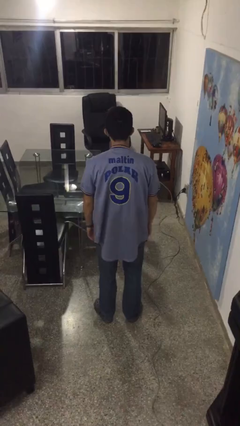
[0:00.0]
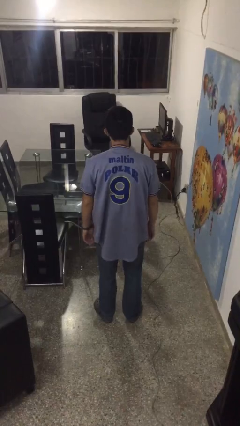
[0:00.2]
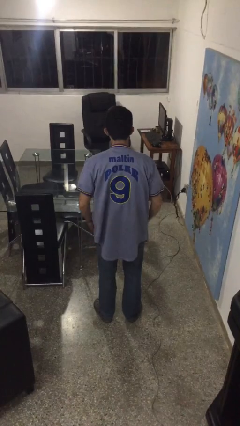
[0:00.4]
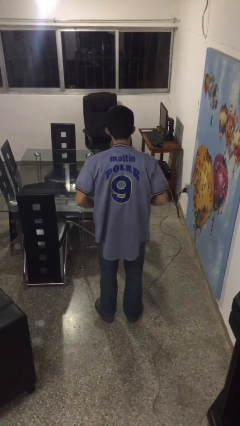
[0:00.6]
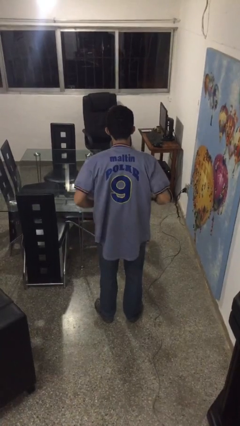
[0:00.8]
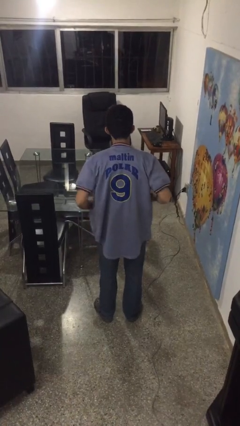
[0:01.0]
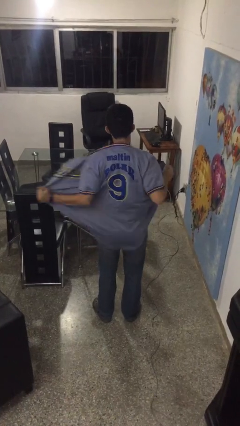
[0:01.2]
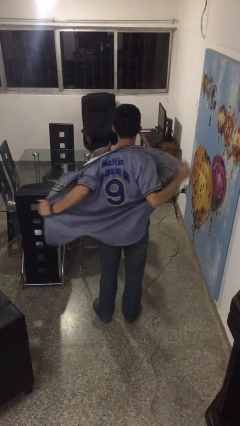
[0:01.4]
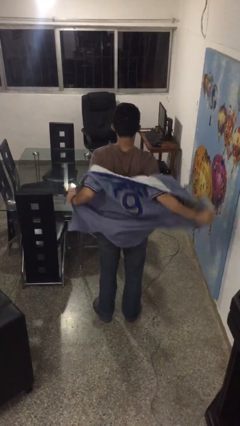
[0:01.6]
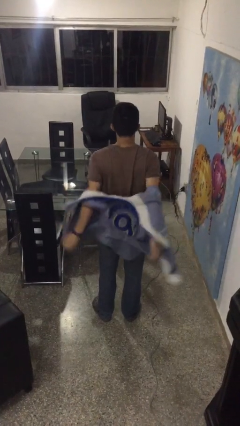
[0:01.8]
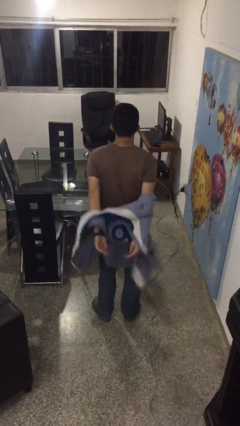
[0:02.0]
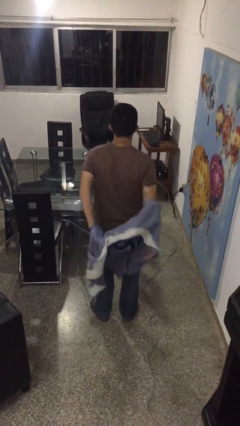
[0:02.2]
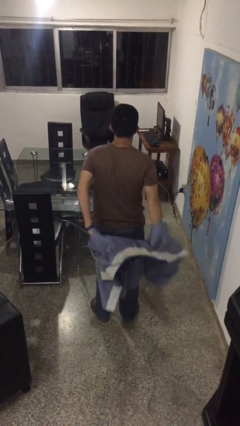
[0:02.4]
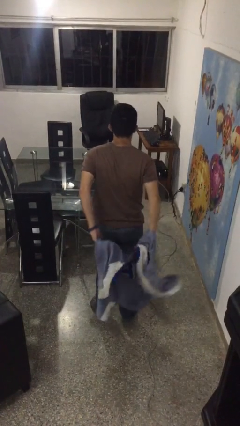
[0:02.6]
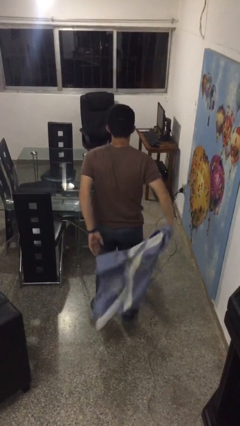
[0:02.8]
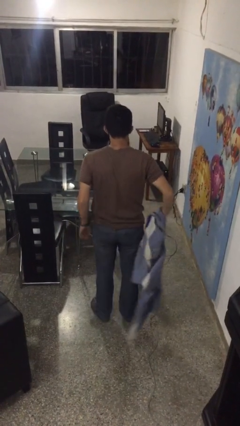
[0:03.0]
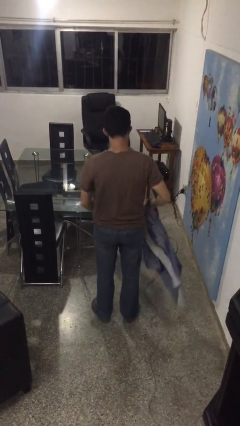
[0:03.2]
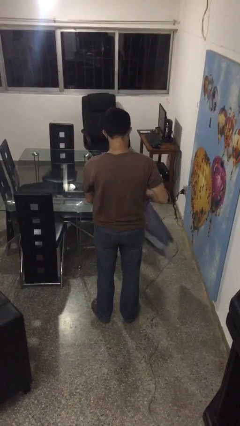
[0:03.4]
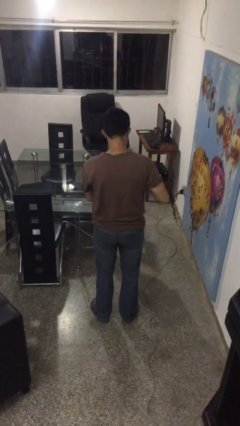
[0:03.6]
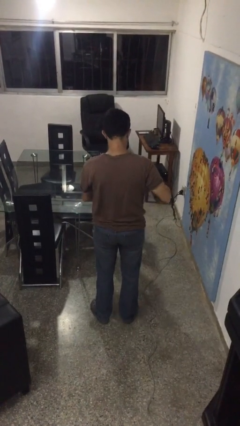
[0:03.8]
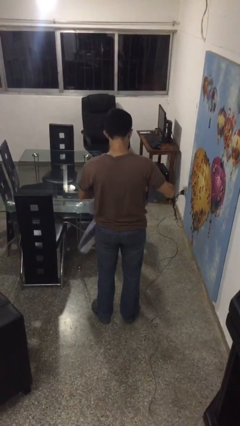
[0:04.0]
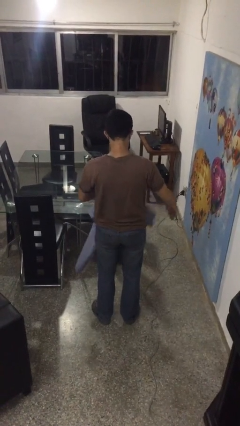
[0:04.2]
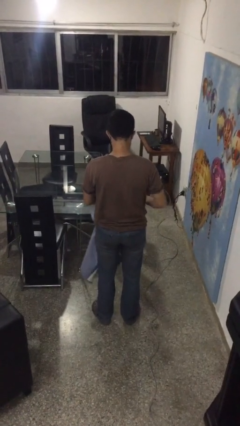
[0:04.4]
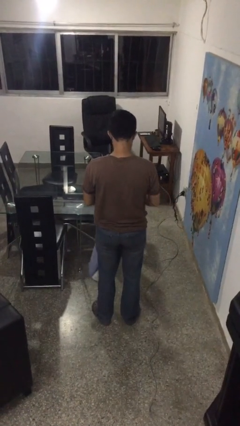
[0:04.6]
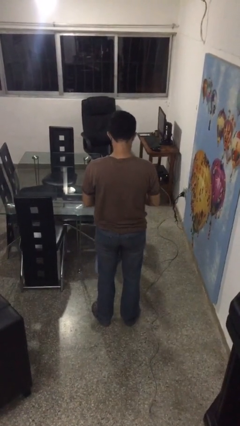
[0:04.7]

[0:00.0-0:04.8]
person takes off shirt

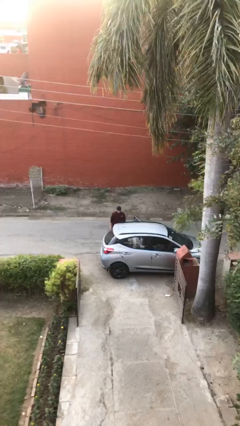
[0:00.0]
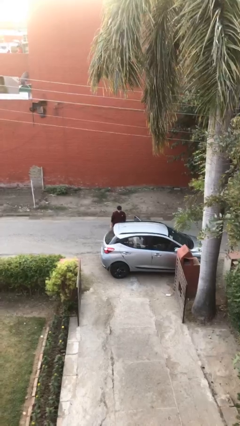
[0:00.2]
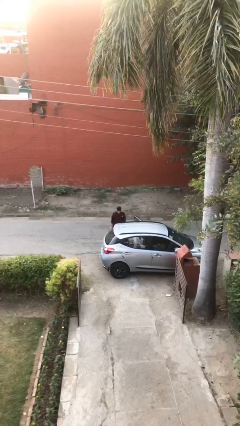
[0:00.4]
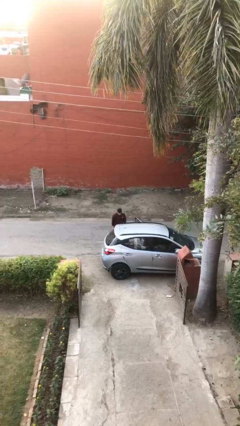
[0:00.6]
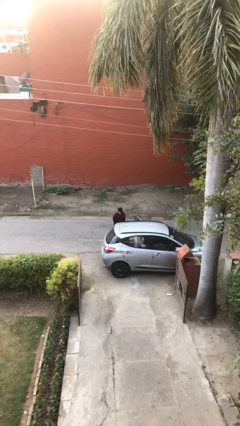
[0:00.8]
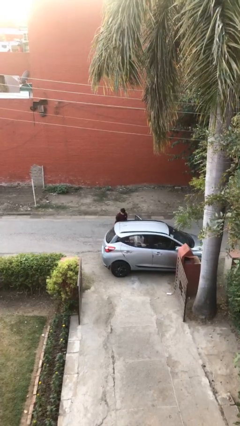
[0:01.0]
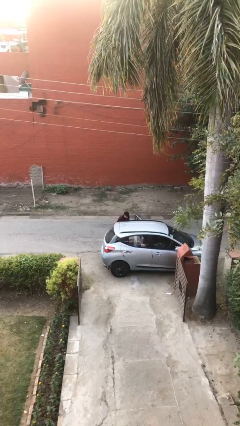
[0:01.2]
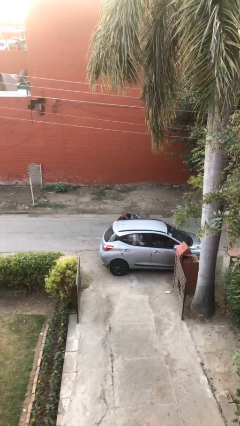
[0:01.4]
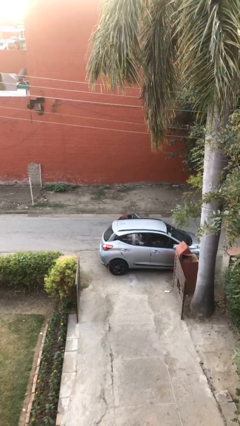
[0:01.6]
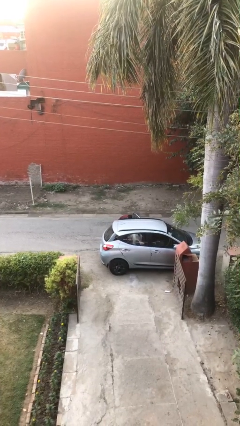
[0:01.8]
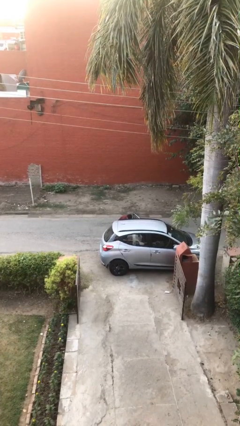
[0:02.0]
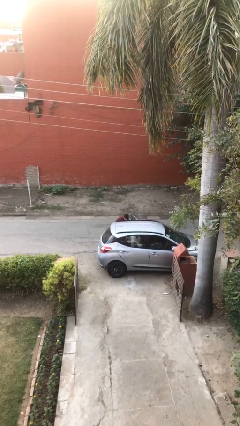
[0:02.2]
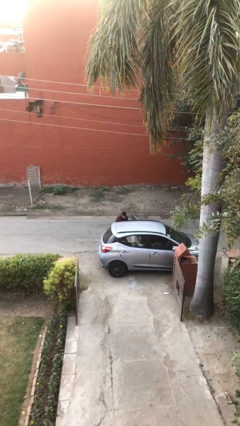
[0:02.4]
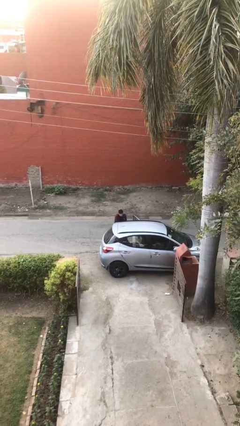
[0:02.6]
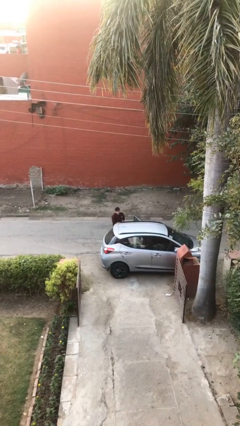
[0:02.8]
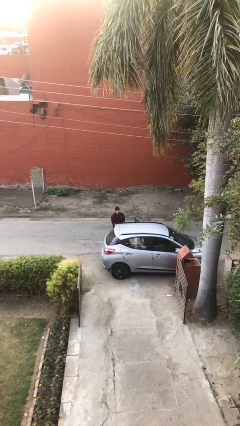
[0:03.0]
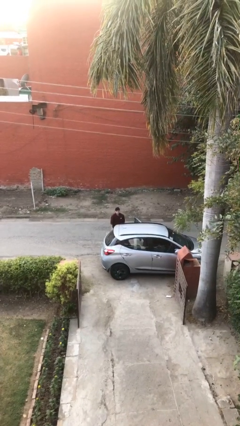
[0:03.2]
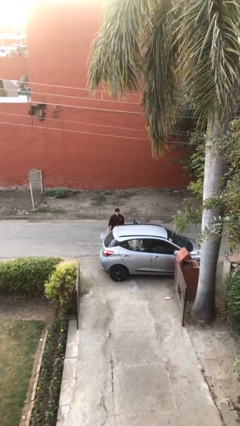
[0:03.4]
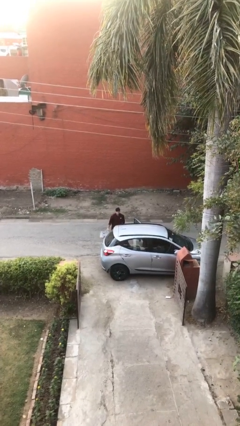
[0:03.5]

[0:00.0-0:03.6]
person unloads car

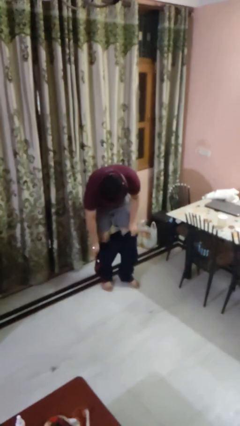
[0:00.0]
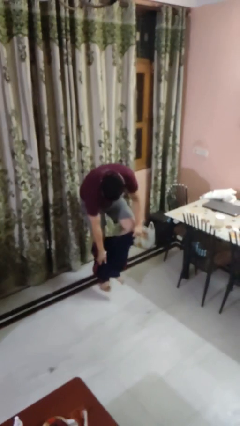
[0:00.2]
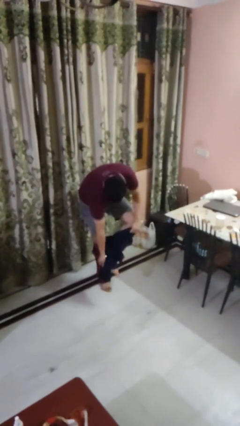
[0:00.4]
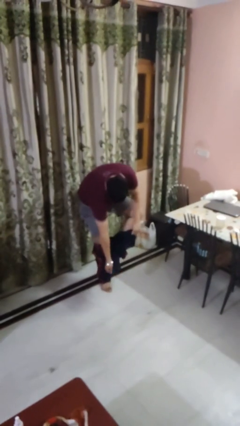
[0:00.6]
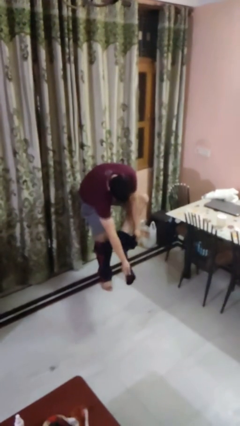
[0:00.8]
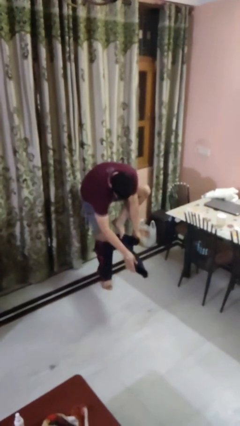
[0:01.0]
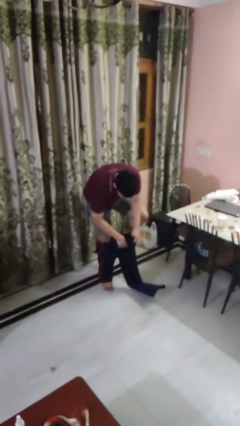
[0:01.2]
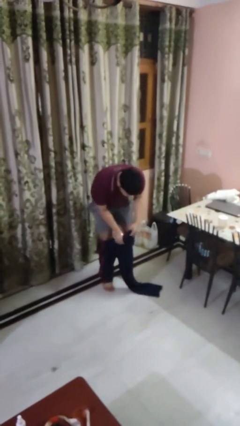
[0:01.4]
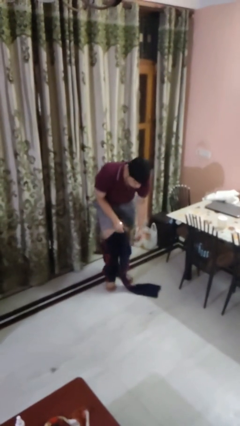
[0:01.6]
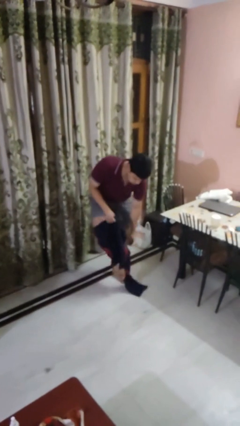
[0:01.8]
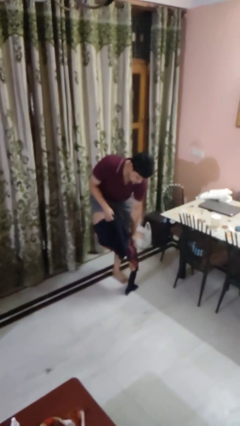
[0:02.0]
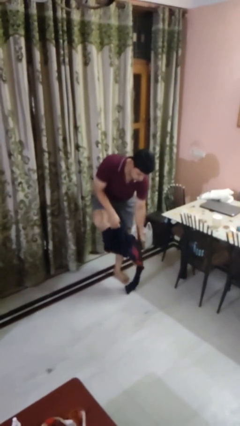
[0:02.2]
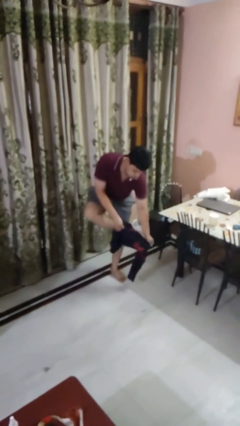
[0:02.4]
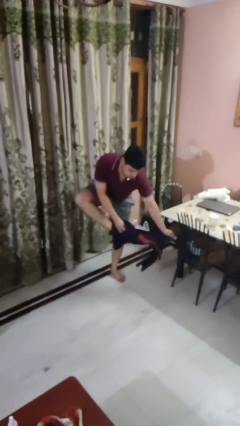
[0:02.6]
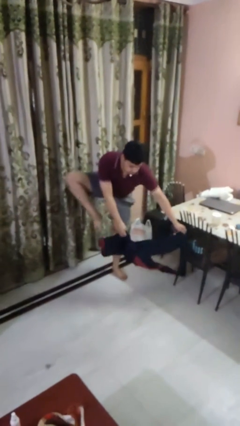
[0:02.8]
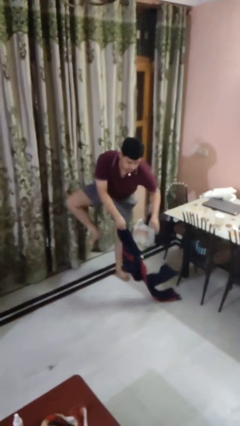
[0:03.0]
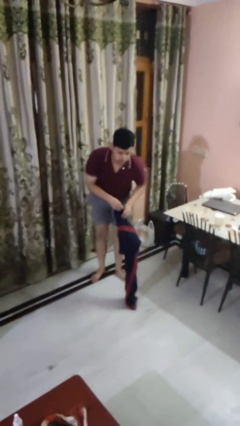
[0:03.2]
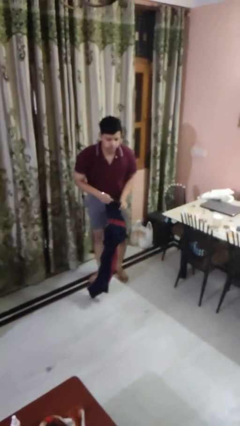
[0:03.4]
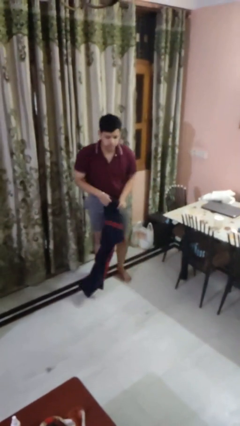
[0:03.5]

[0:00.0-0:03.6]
person takes off pants

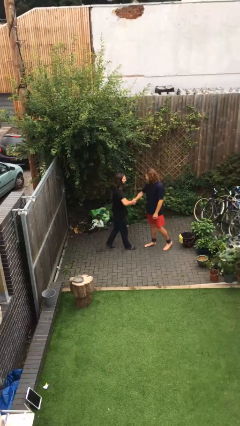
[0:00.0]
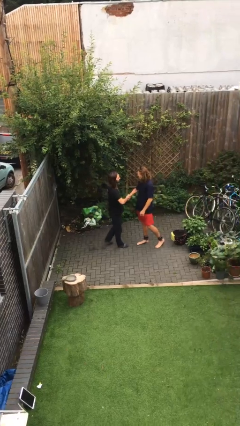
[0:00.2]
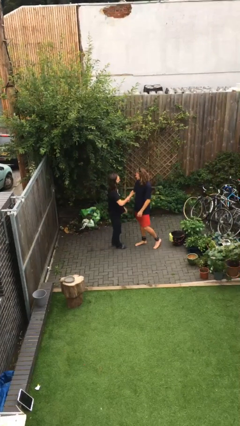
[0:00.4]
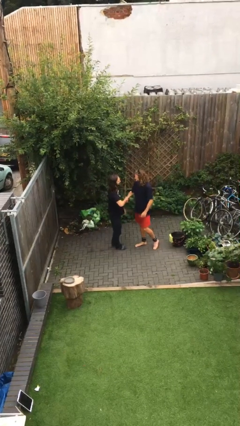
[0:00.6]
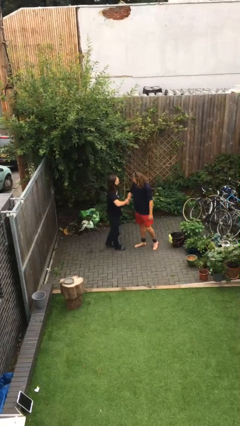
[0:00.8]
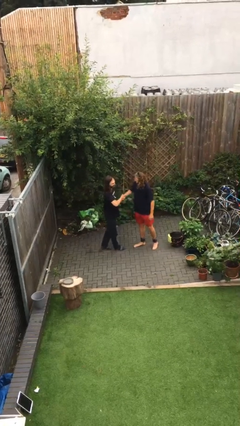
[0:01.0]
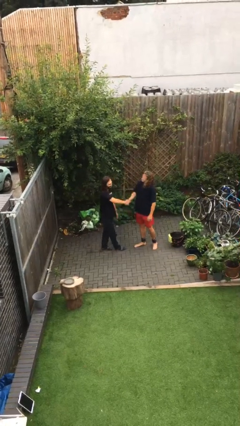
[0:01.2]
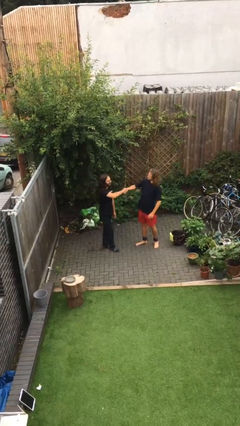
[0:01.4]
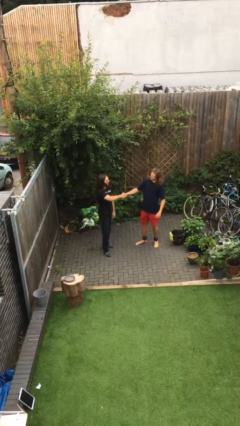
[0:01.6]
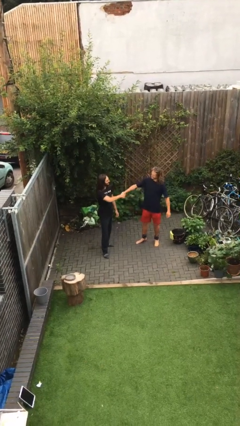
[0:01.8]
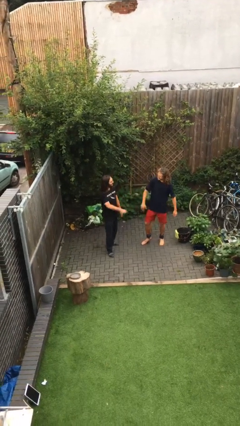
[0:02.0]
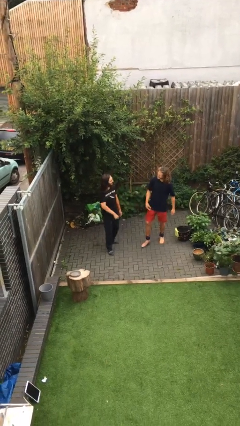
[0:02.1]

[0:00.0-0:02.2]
person shakes hand

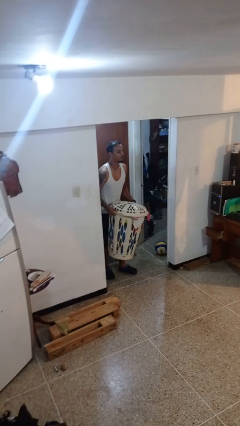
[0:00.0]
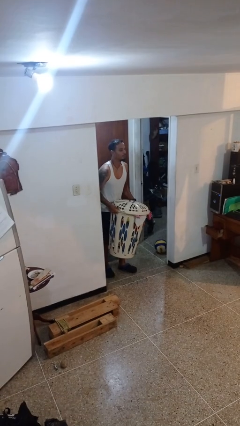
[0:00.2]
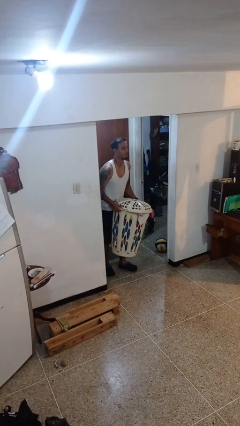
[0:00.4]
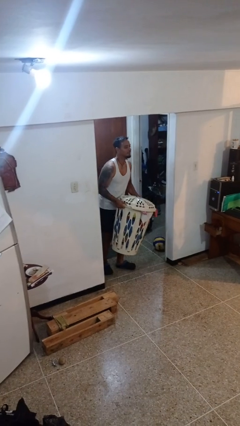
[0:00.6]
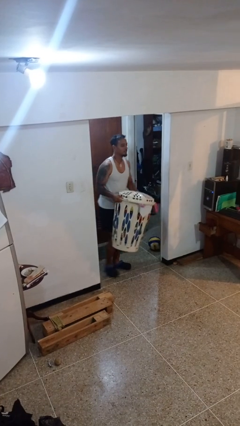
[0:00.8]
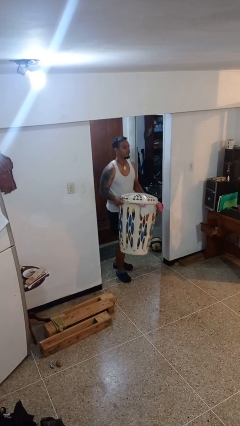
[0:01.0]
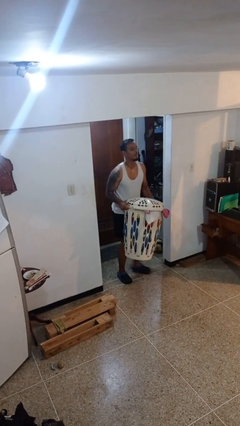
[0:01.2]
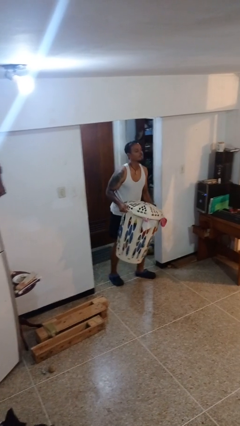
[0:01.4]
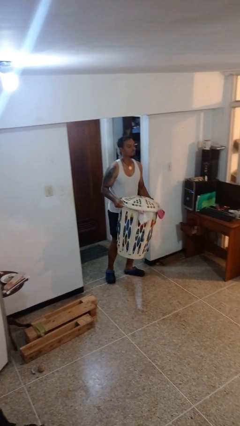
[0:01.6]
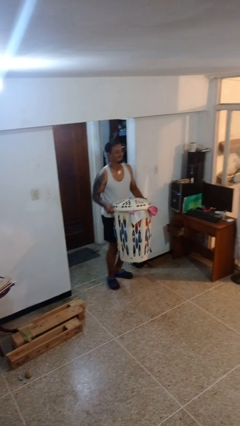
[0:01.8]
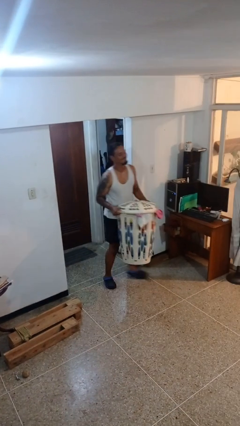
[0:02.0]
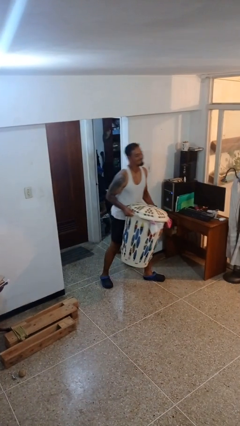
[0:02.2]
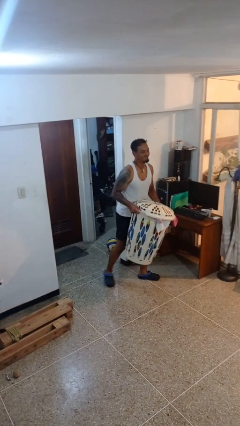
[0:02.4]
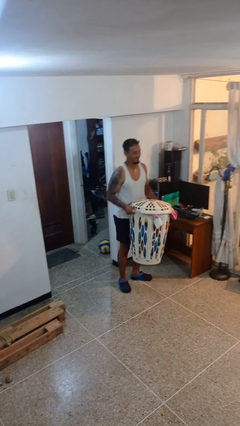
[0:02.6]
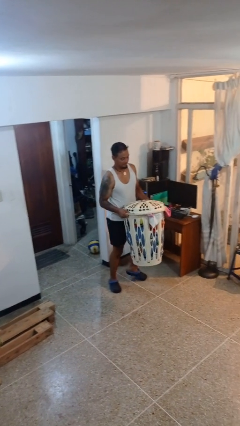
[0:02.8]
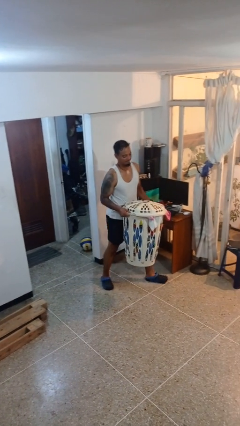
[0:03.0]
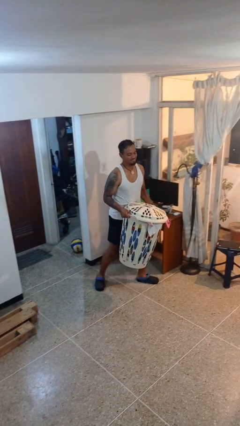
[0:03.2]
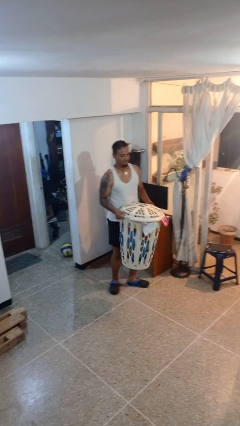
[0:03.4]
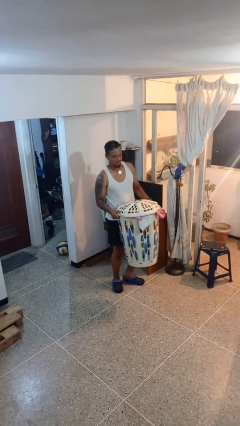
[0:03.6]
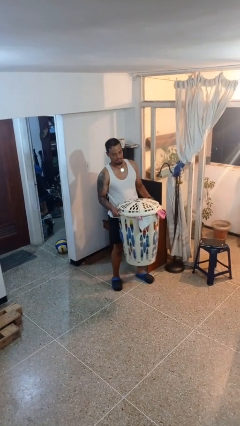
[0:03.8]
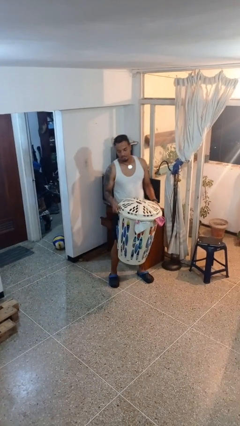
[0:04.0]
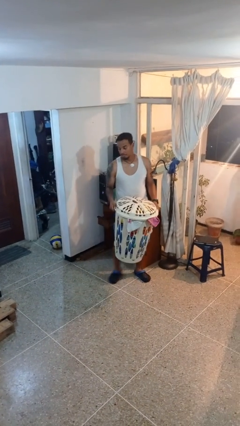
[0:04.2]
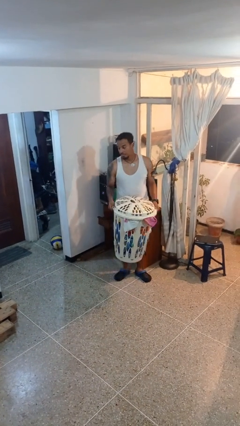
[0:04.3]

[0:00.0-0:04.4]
person carries laundry basket
